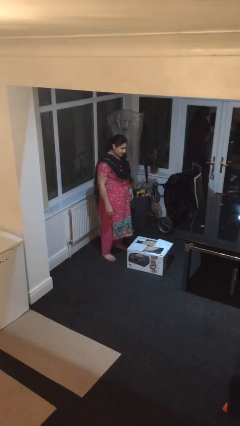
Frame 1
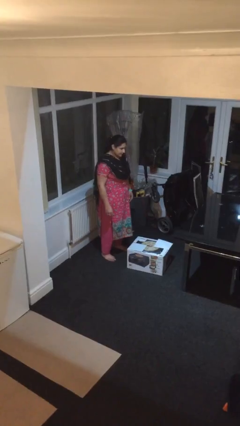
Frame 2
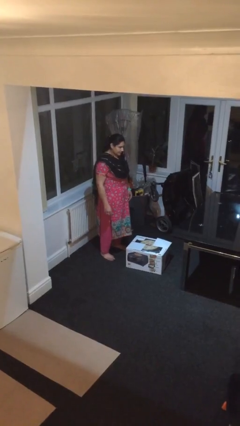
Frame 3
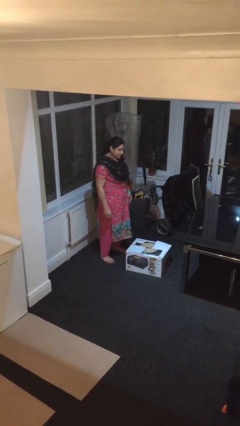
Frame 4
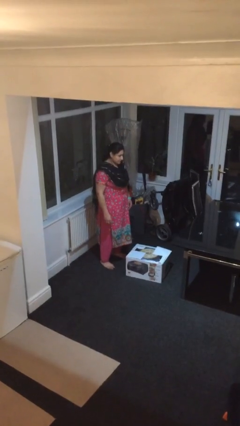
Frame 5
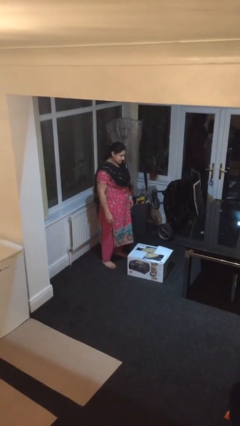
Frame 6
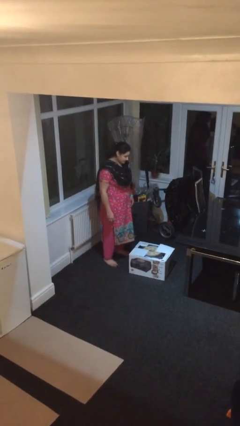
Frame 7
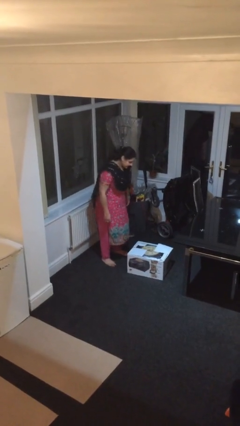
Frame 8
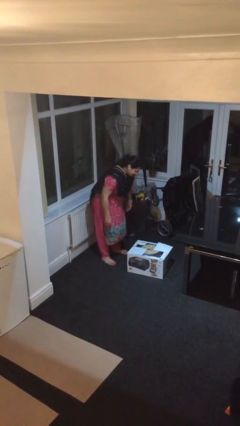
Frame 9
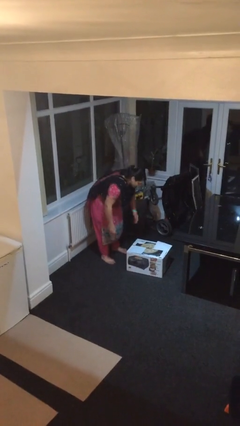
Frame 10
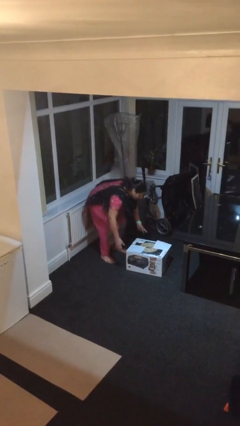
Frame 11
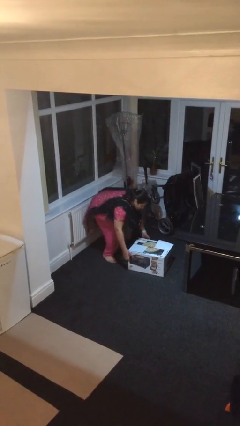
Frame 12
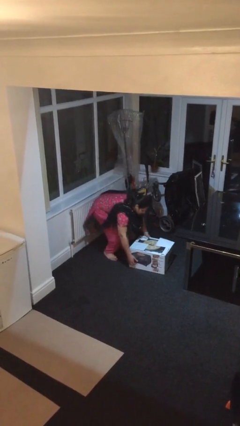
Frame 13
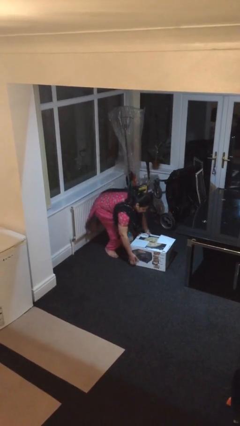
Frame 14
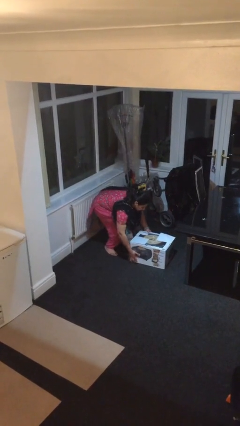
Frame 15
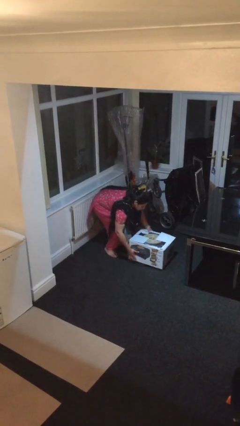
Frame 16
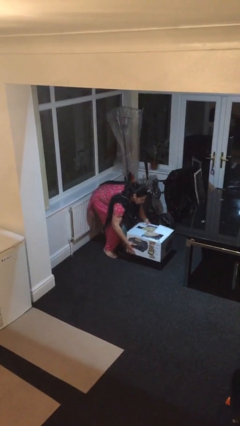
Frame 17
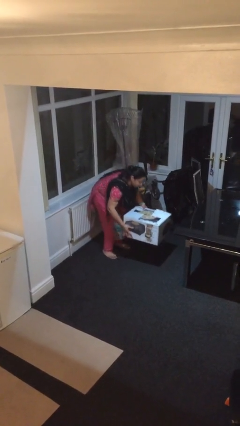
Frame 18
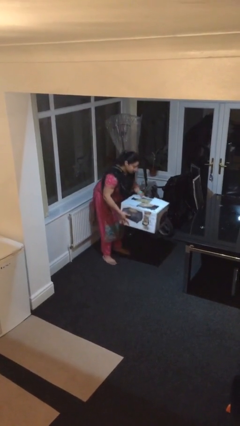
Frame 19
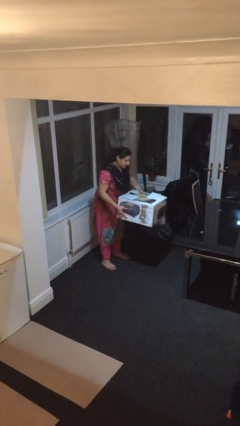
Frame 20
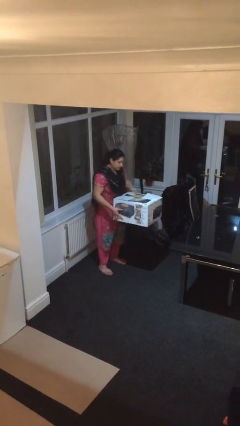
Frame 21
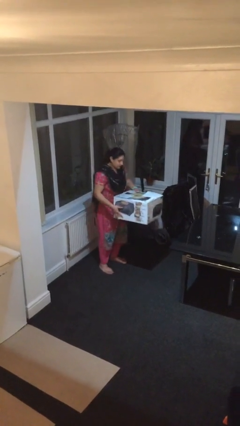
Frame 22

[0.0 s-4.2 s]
person picks up object from floor

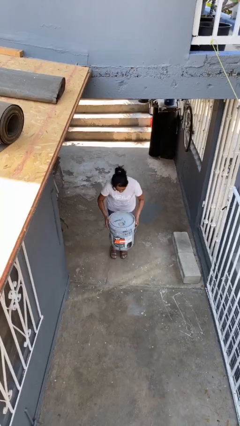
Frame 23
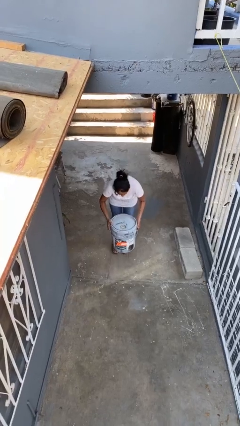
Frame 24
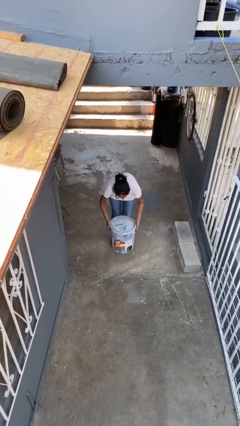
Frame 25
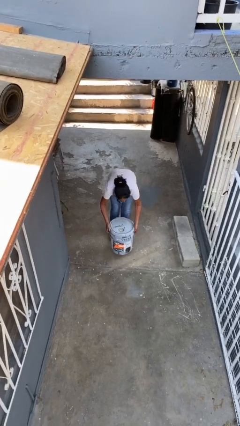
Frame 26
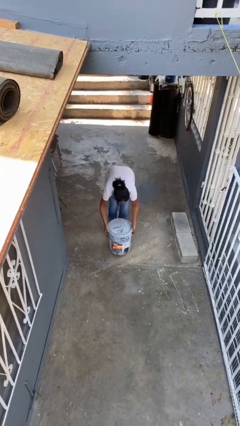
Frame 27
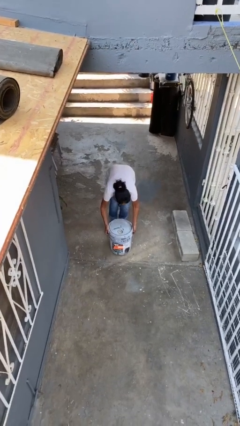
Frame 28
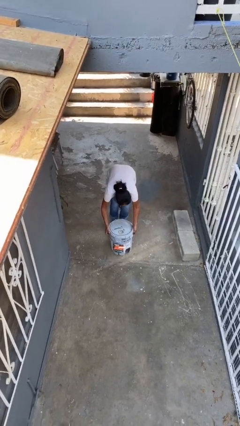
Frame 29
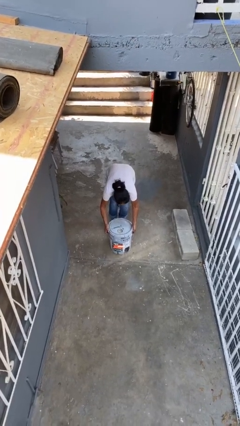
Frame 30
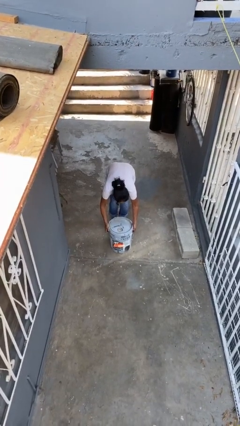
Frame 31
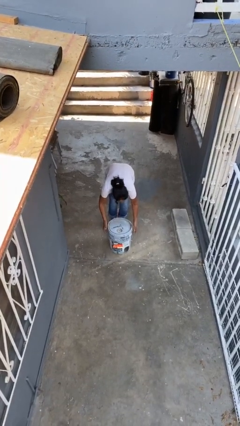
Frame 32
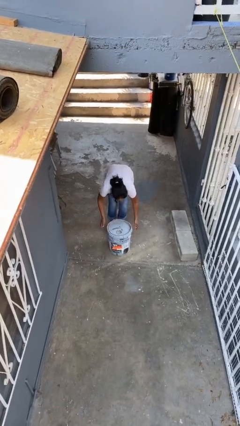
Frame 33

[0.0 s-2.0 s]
person puts down object on floor

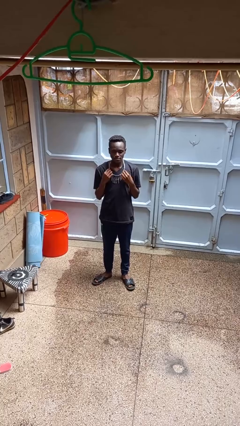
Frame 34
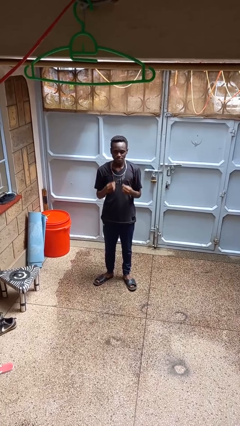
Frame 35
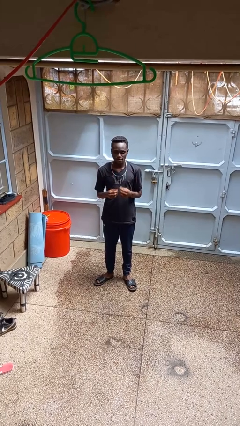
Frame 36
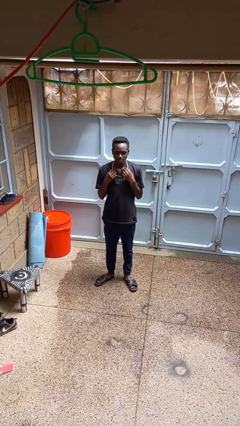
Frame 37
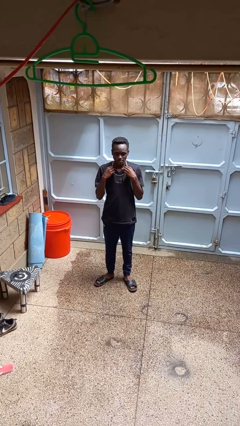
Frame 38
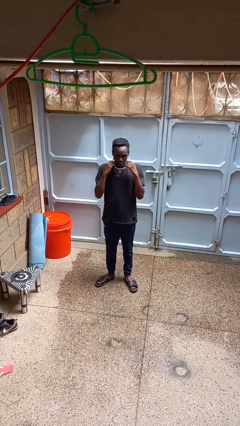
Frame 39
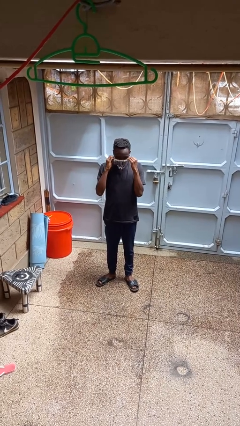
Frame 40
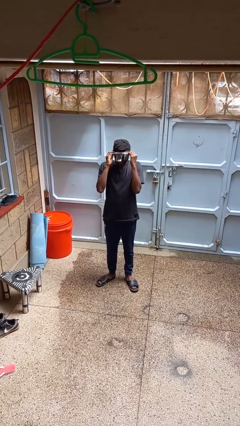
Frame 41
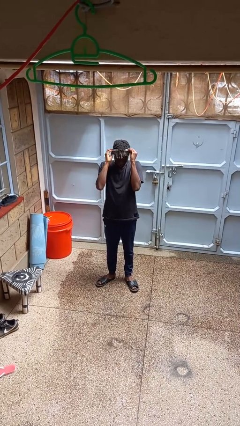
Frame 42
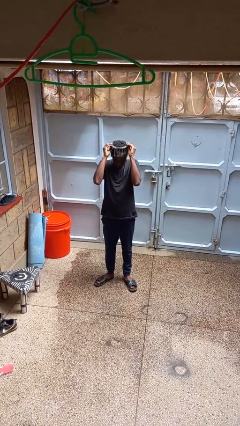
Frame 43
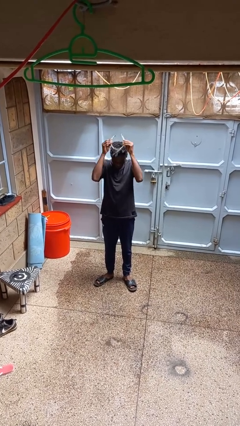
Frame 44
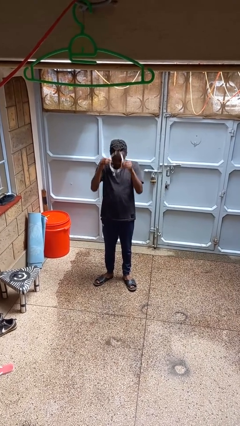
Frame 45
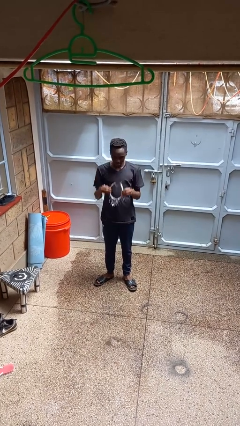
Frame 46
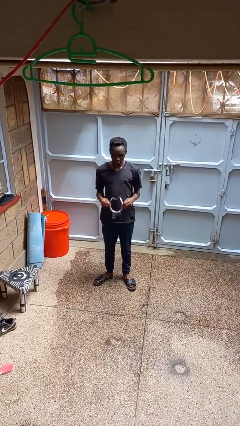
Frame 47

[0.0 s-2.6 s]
person takes off necklace

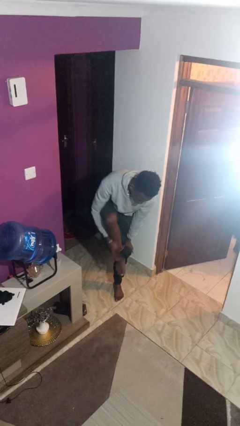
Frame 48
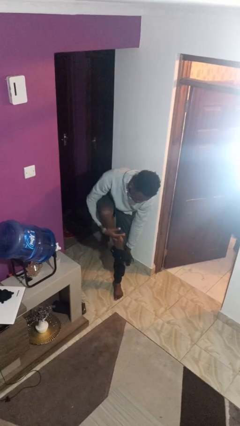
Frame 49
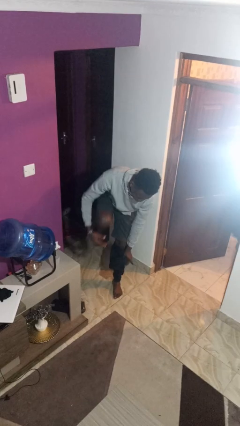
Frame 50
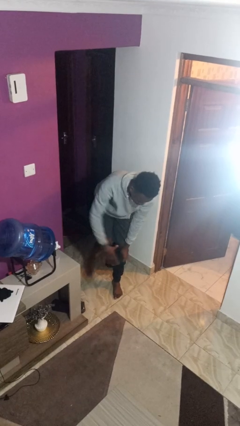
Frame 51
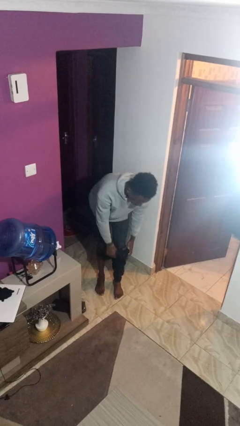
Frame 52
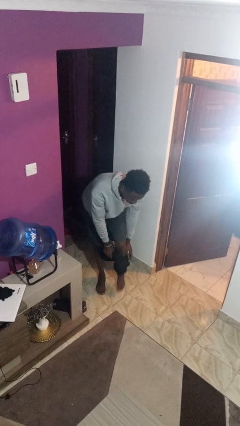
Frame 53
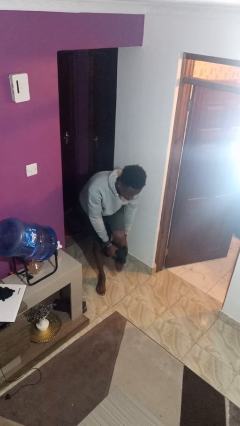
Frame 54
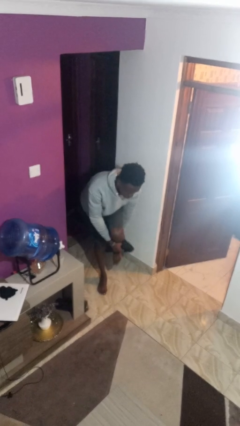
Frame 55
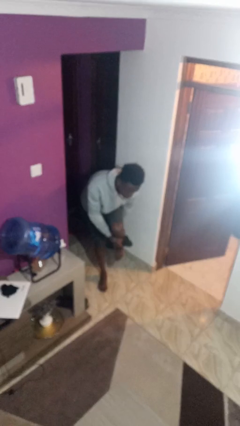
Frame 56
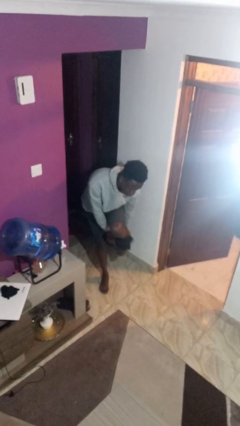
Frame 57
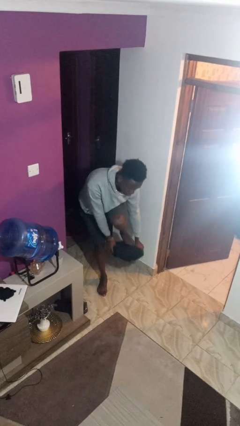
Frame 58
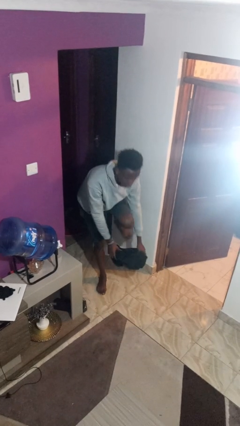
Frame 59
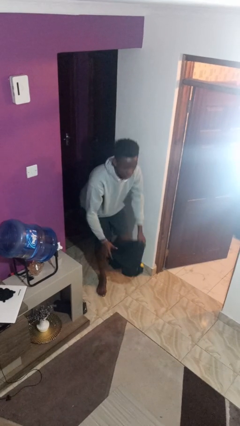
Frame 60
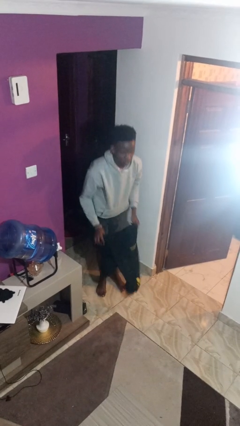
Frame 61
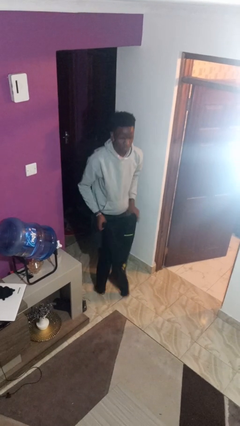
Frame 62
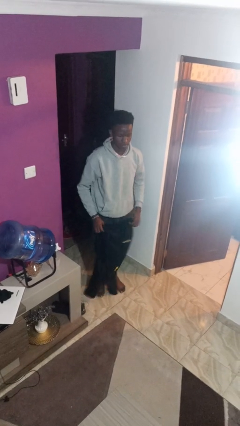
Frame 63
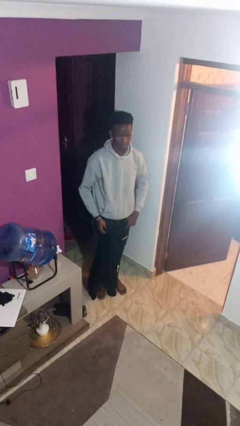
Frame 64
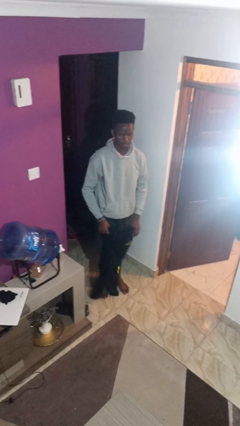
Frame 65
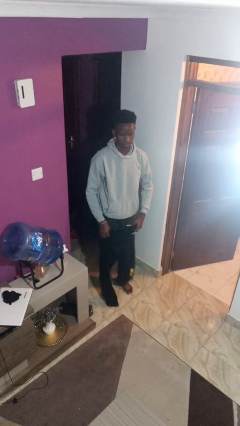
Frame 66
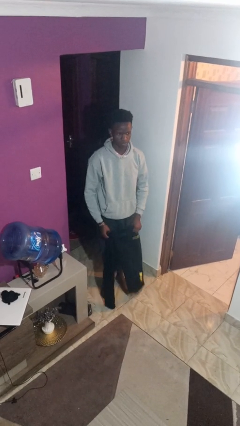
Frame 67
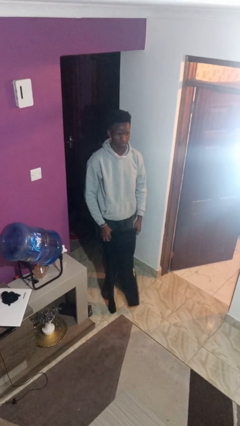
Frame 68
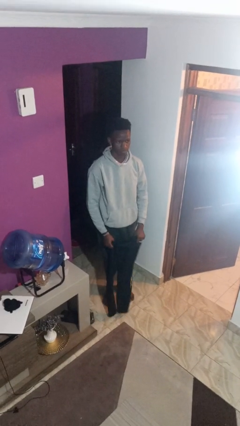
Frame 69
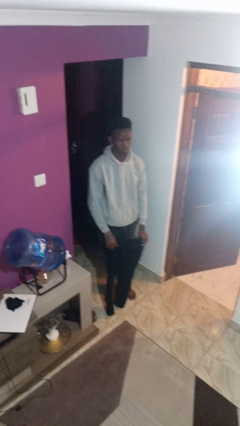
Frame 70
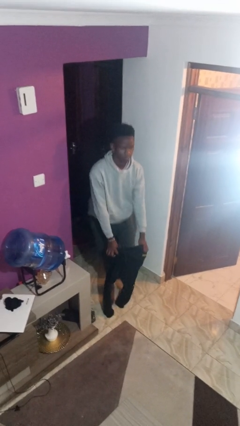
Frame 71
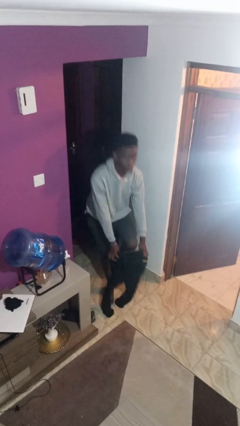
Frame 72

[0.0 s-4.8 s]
person takes off pants

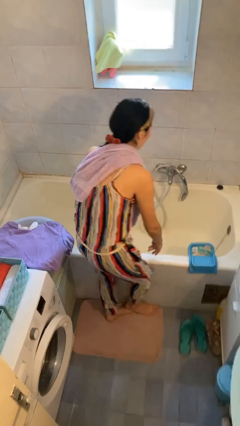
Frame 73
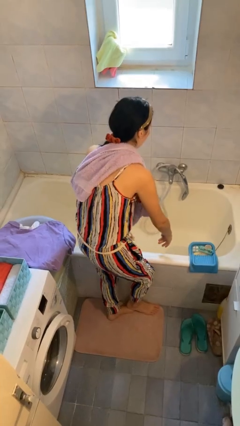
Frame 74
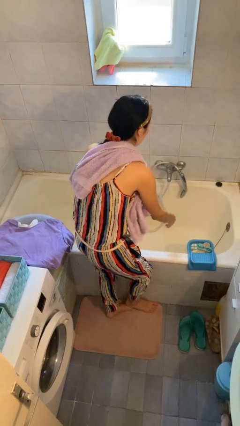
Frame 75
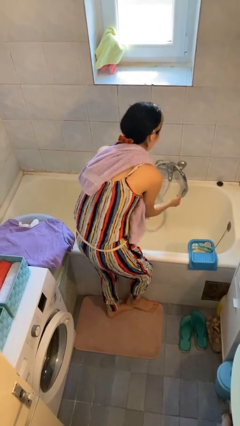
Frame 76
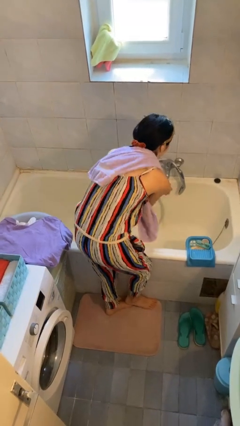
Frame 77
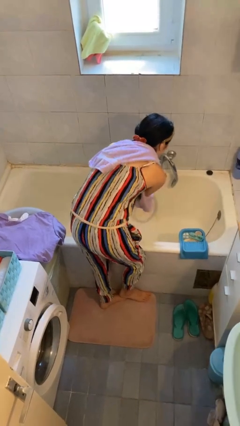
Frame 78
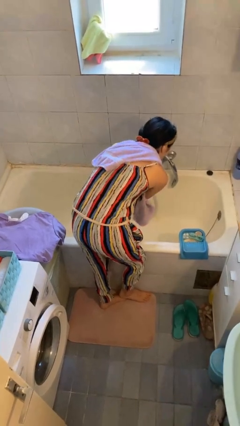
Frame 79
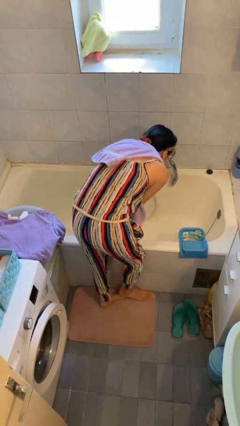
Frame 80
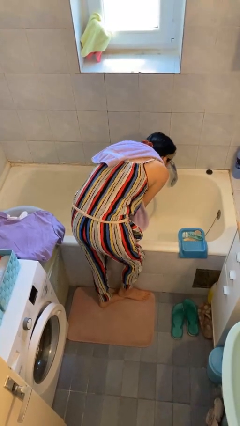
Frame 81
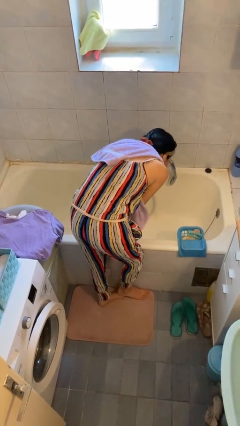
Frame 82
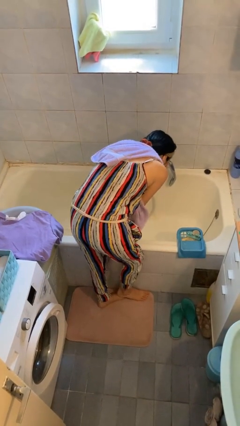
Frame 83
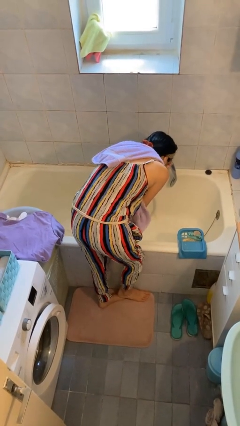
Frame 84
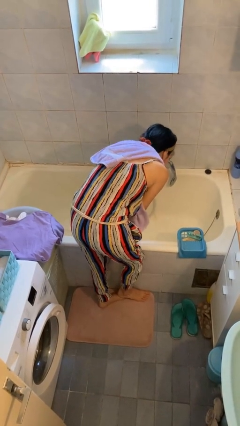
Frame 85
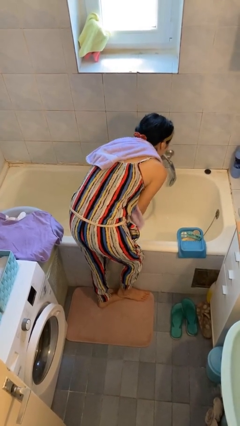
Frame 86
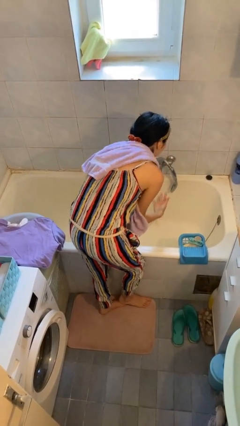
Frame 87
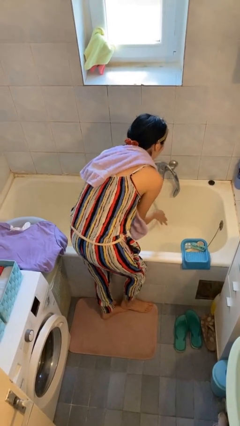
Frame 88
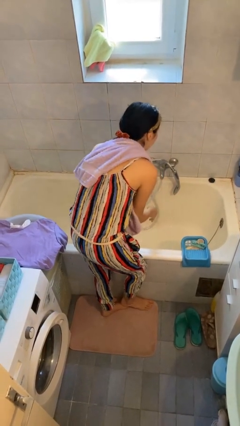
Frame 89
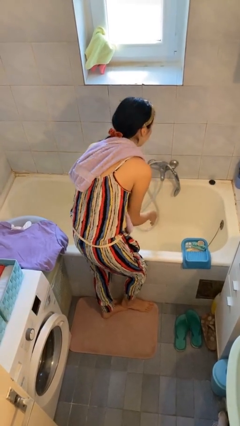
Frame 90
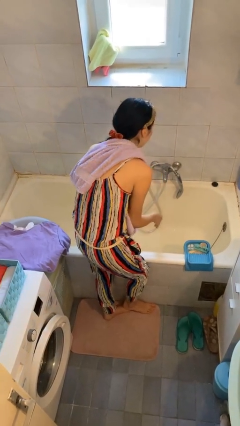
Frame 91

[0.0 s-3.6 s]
person washes face
